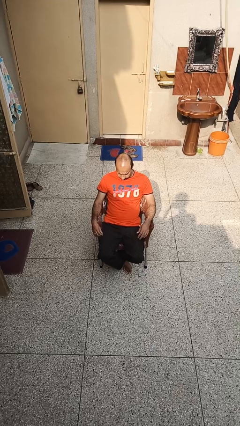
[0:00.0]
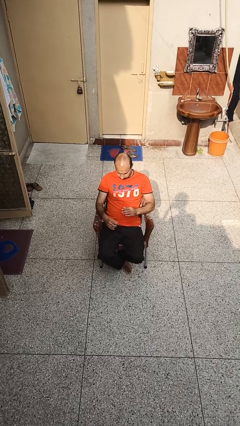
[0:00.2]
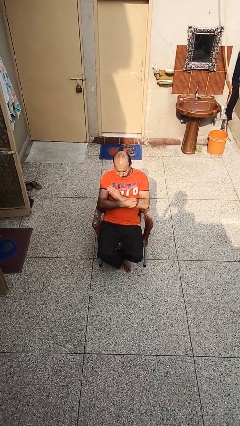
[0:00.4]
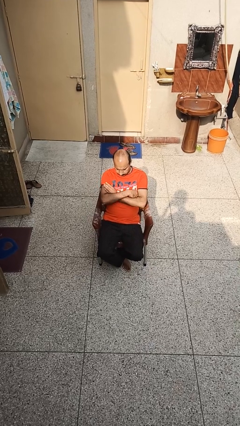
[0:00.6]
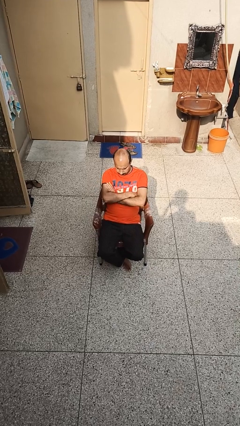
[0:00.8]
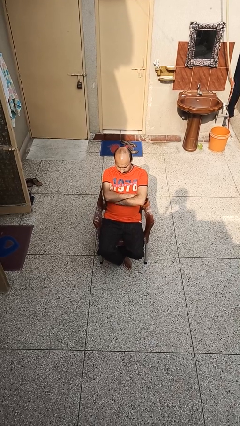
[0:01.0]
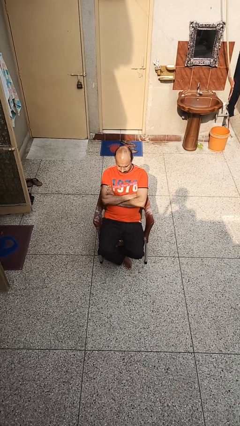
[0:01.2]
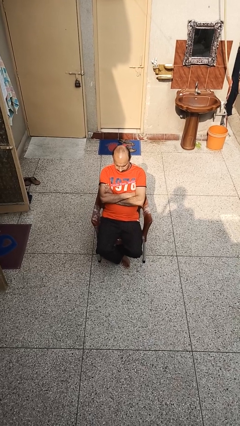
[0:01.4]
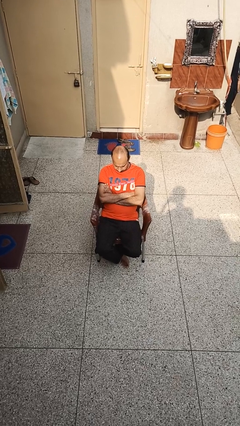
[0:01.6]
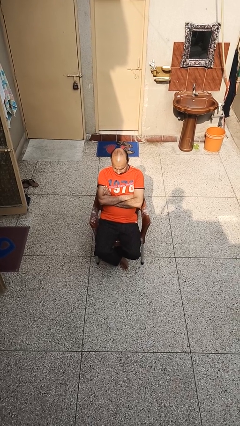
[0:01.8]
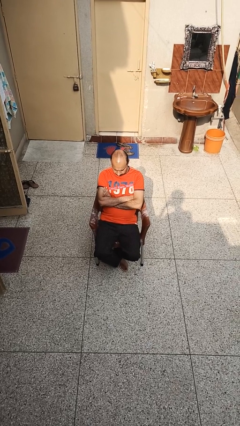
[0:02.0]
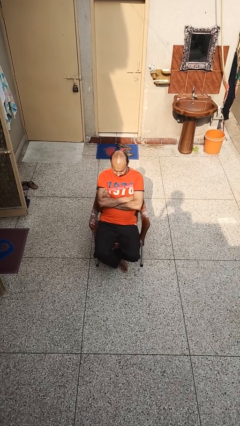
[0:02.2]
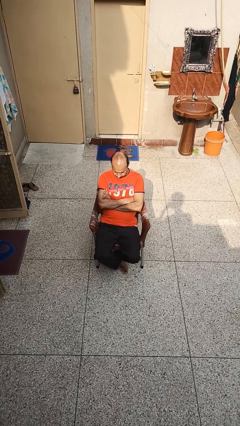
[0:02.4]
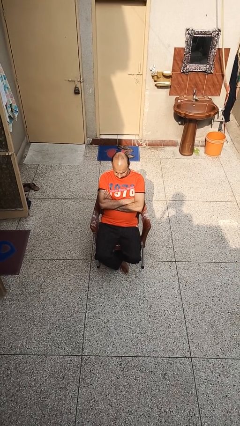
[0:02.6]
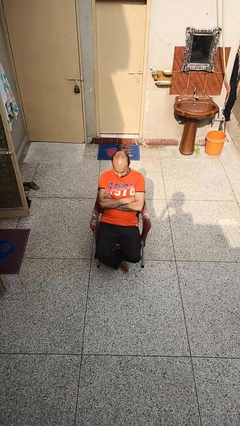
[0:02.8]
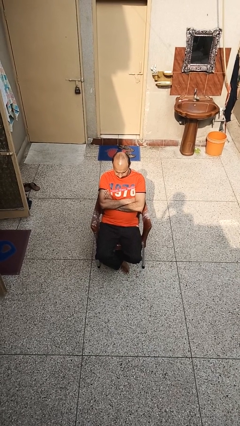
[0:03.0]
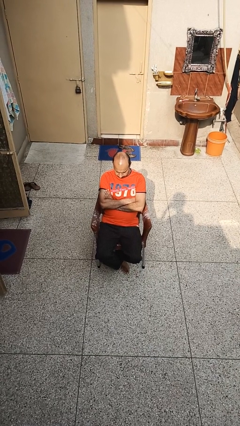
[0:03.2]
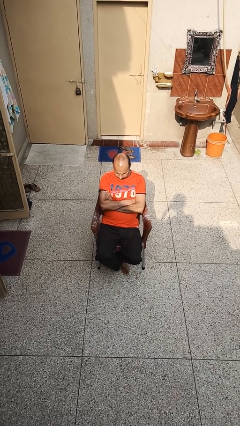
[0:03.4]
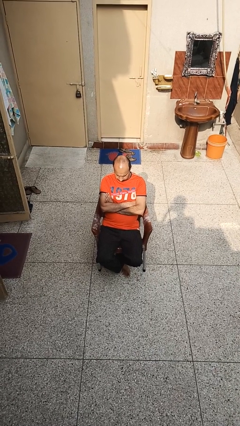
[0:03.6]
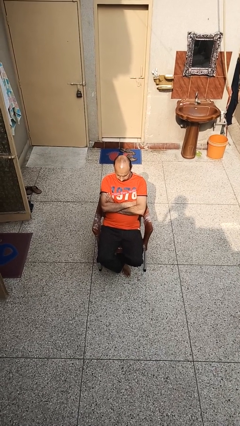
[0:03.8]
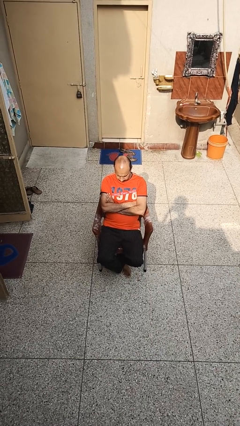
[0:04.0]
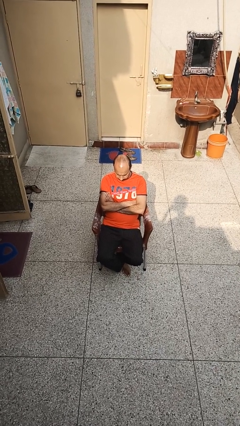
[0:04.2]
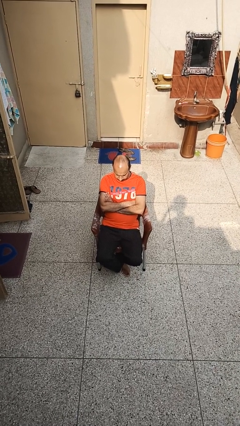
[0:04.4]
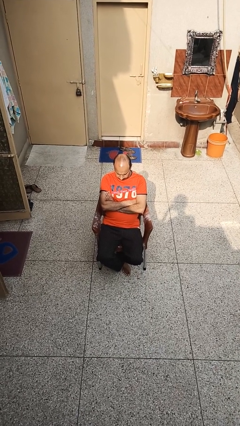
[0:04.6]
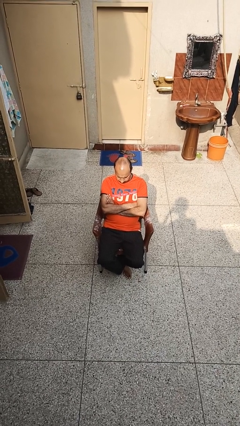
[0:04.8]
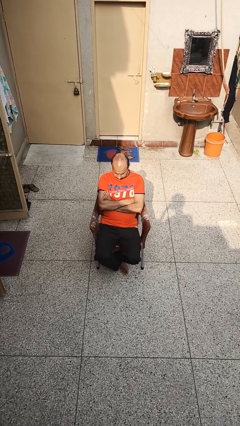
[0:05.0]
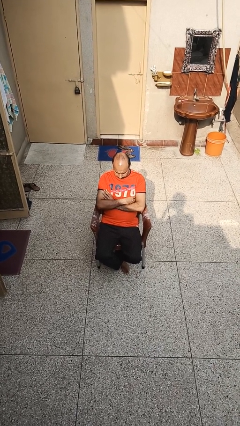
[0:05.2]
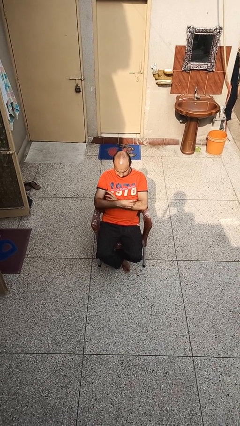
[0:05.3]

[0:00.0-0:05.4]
person crosses arms

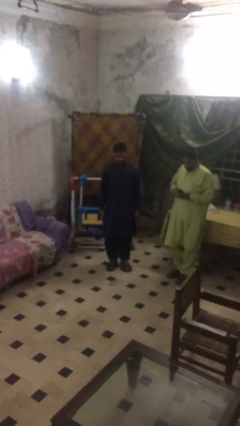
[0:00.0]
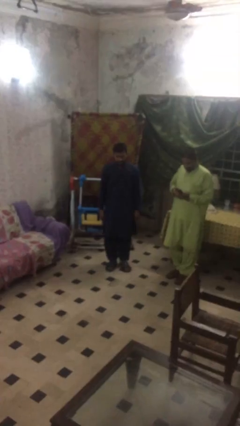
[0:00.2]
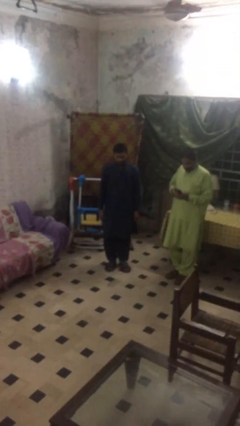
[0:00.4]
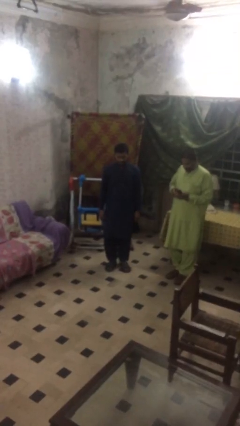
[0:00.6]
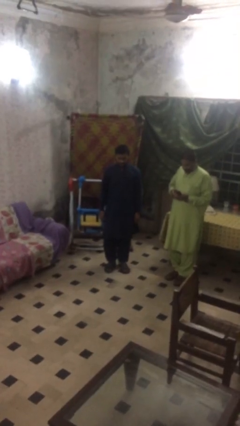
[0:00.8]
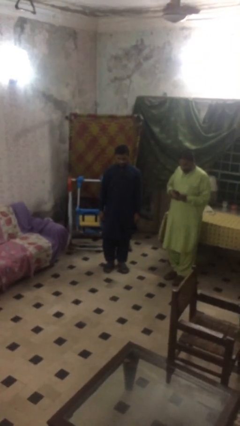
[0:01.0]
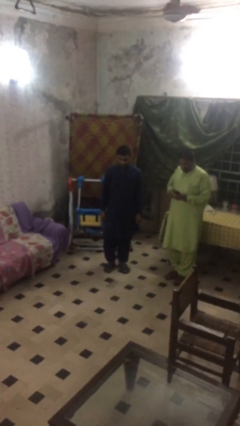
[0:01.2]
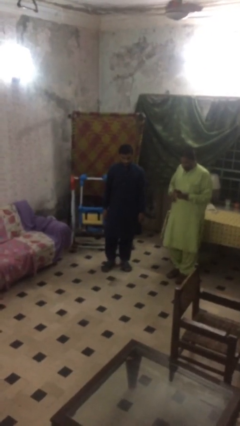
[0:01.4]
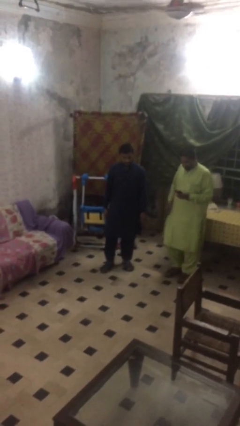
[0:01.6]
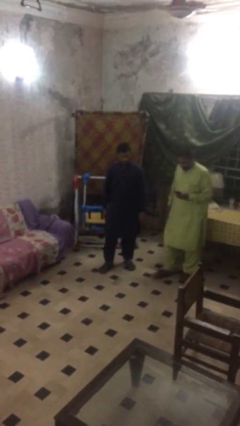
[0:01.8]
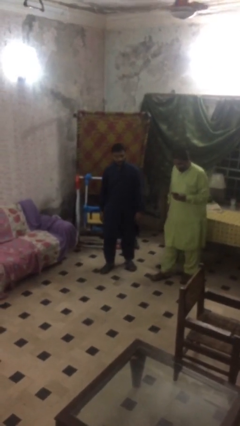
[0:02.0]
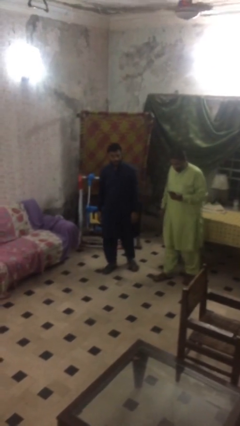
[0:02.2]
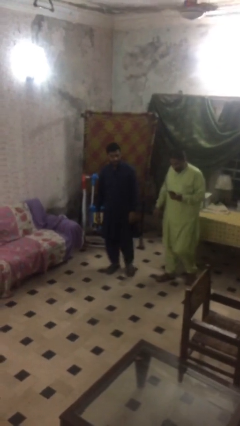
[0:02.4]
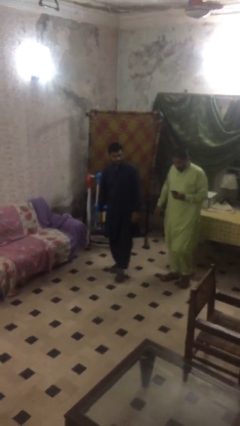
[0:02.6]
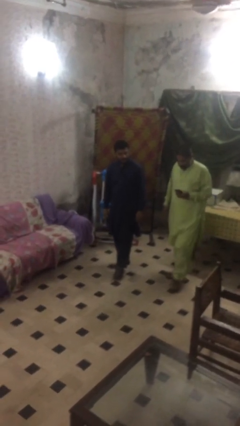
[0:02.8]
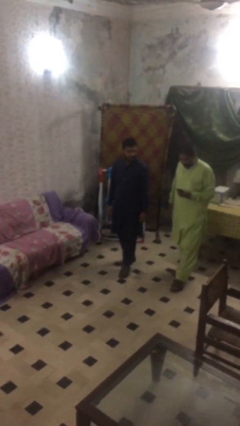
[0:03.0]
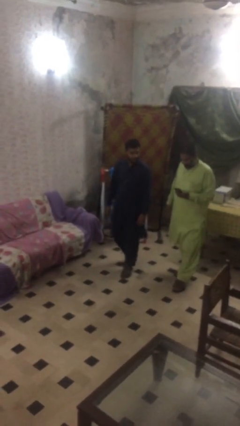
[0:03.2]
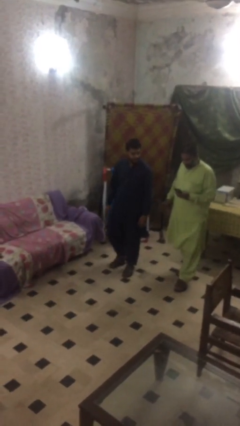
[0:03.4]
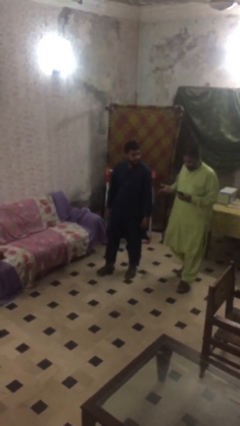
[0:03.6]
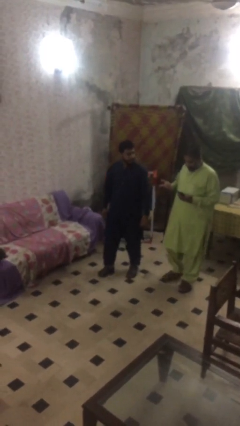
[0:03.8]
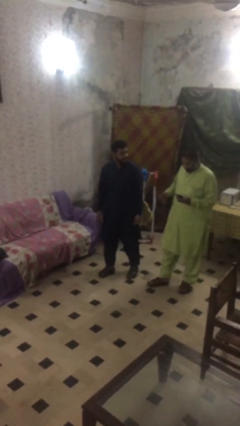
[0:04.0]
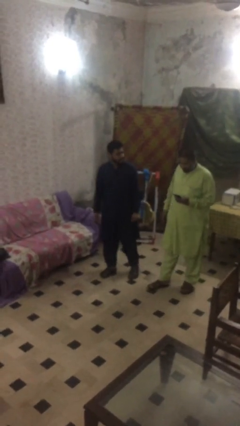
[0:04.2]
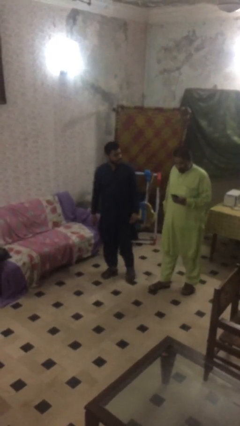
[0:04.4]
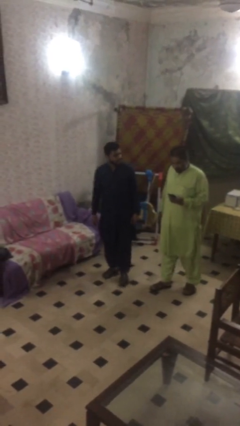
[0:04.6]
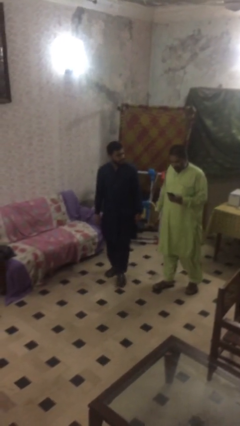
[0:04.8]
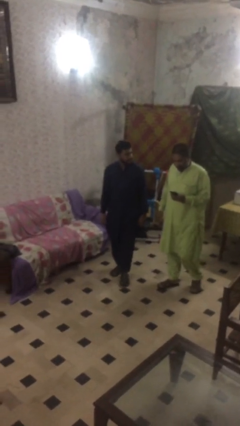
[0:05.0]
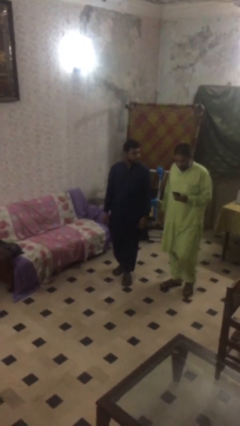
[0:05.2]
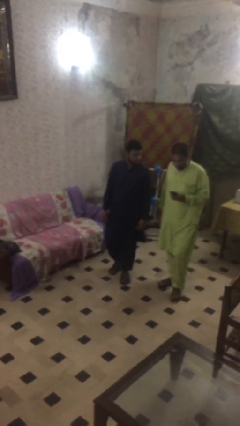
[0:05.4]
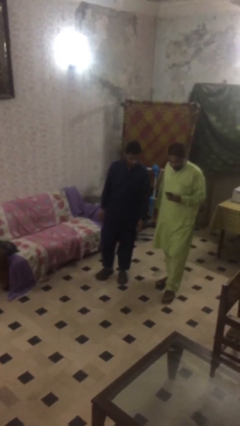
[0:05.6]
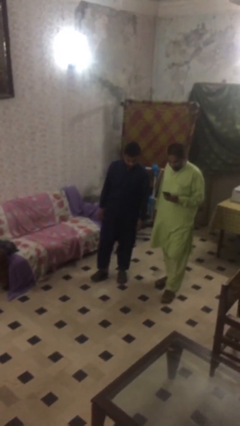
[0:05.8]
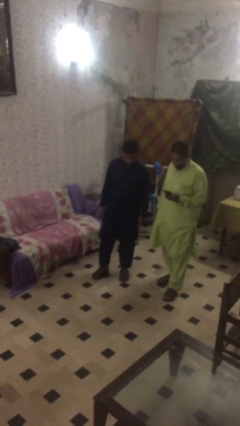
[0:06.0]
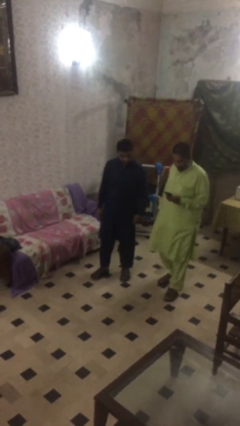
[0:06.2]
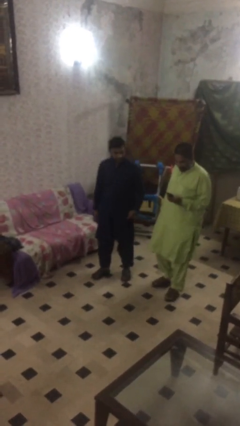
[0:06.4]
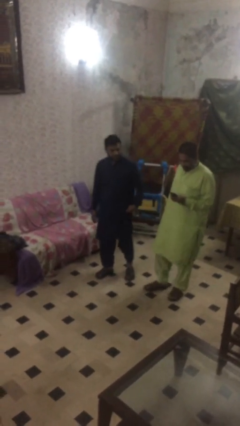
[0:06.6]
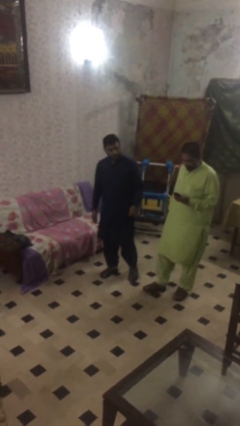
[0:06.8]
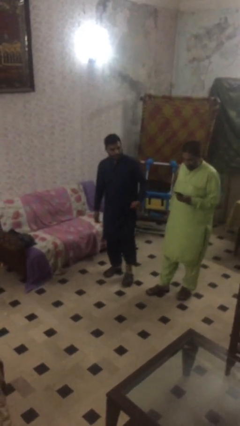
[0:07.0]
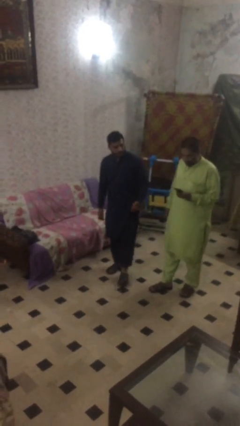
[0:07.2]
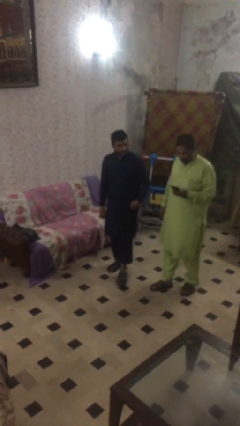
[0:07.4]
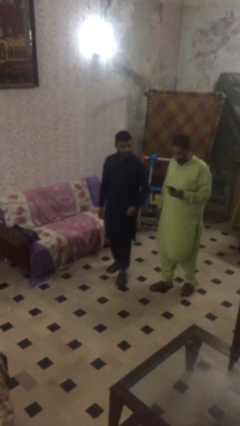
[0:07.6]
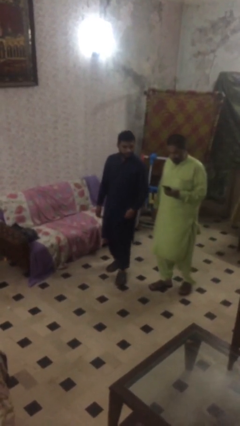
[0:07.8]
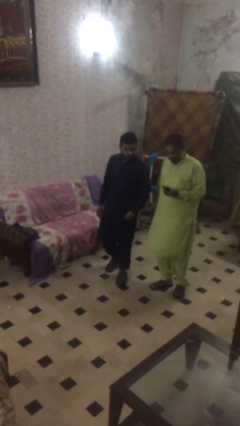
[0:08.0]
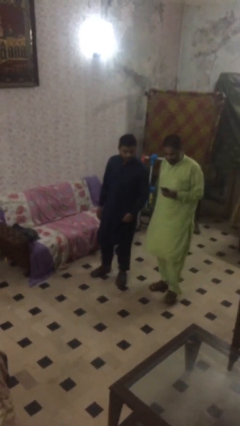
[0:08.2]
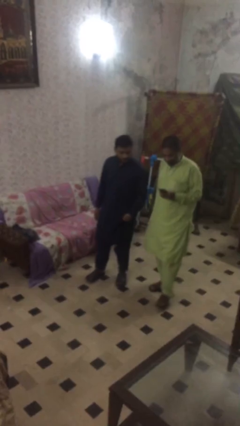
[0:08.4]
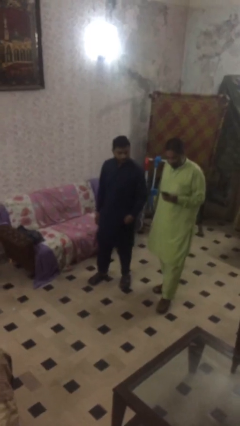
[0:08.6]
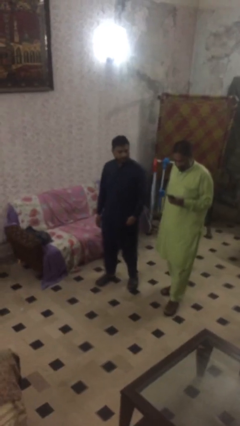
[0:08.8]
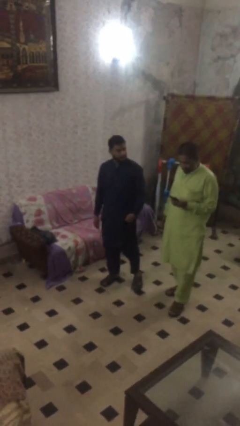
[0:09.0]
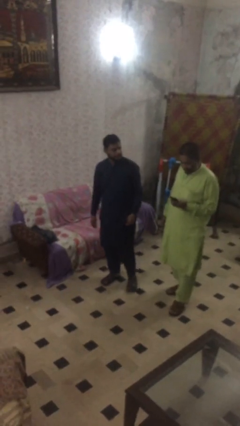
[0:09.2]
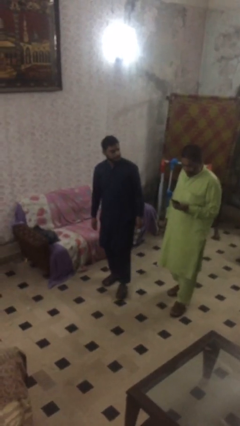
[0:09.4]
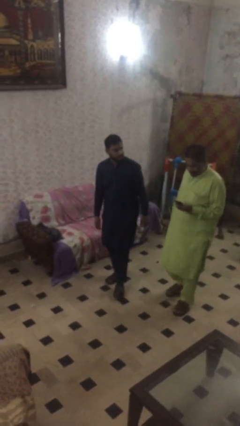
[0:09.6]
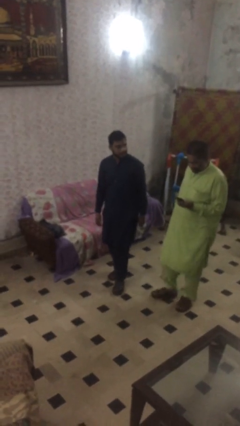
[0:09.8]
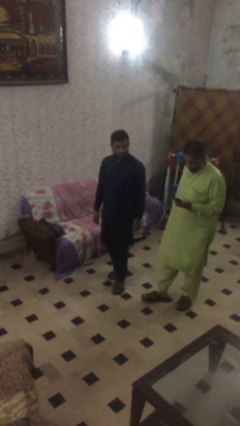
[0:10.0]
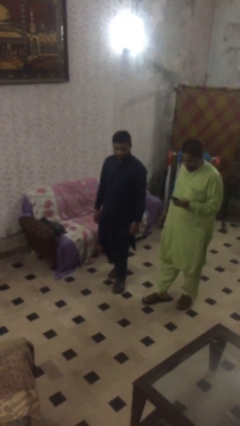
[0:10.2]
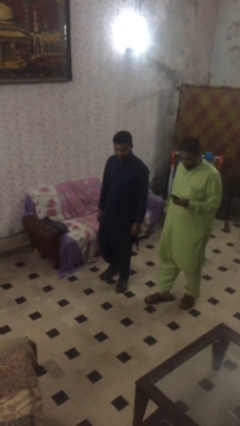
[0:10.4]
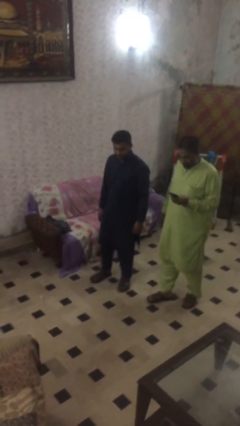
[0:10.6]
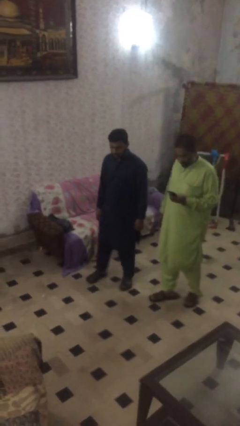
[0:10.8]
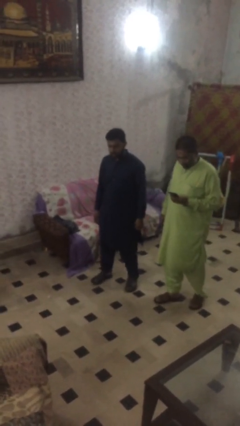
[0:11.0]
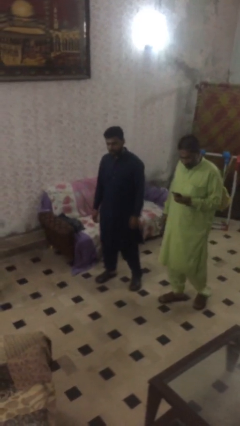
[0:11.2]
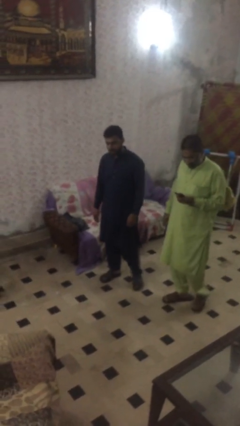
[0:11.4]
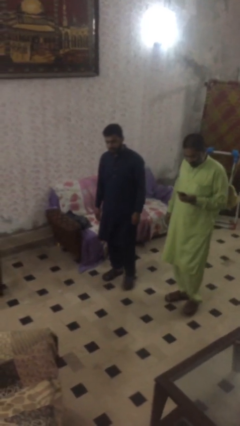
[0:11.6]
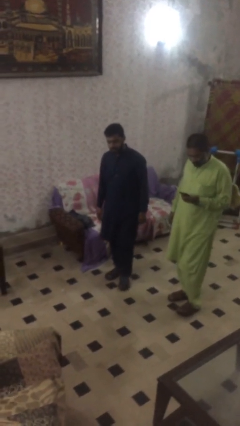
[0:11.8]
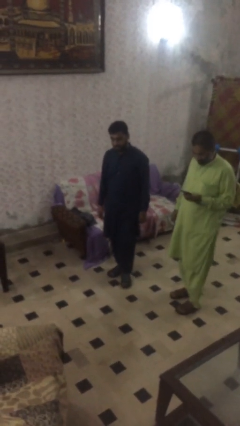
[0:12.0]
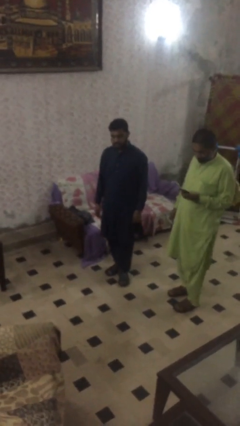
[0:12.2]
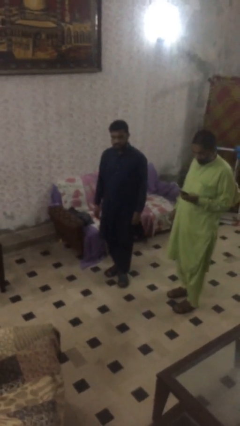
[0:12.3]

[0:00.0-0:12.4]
person talks to person

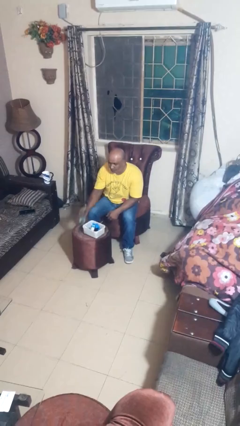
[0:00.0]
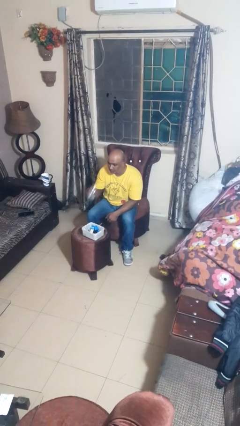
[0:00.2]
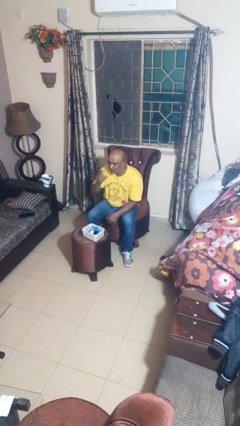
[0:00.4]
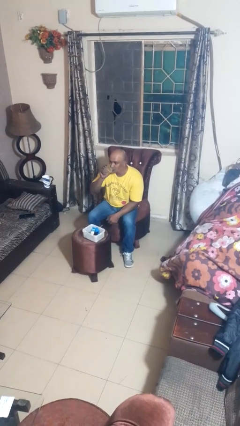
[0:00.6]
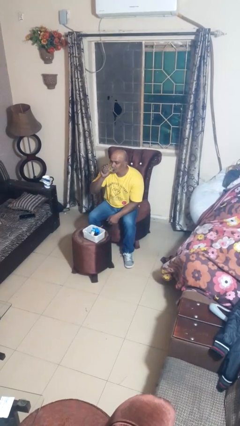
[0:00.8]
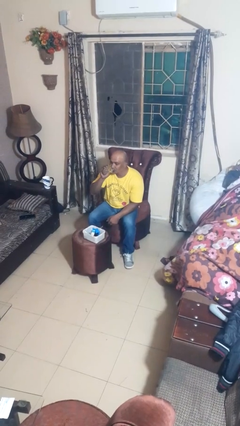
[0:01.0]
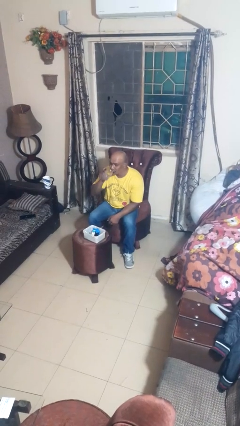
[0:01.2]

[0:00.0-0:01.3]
person drinks from cup
